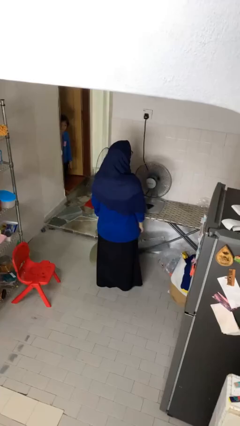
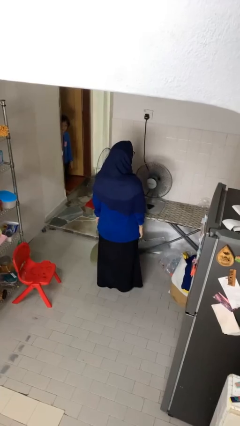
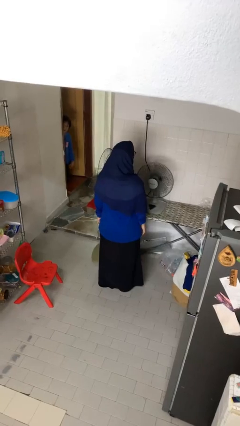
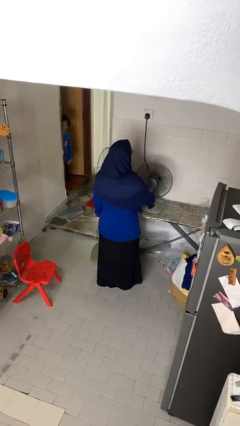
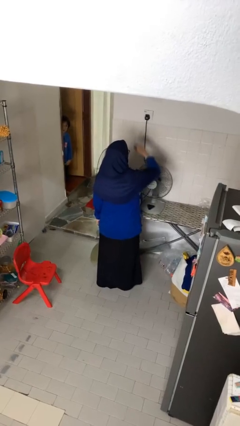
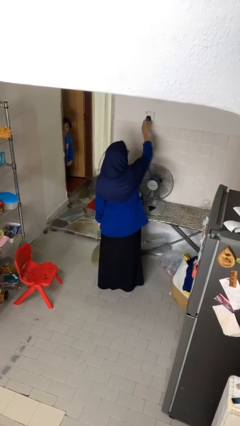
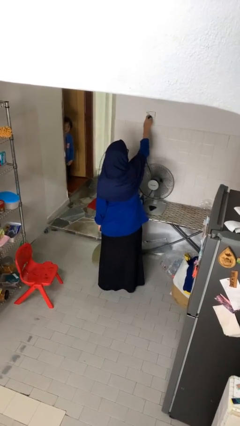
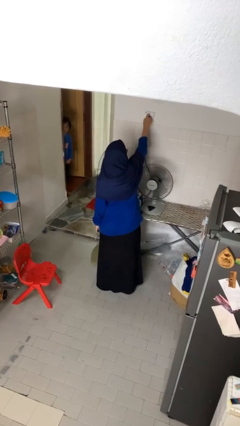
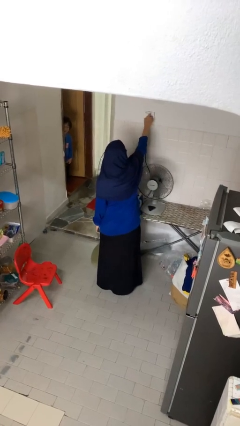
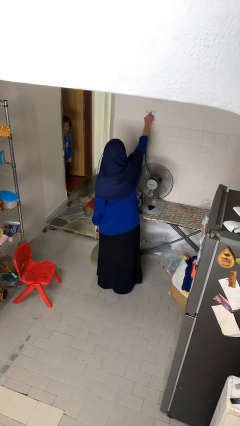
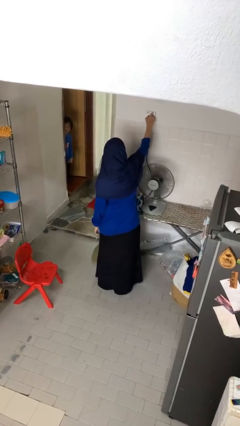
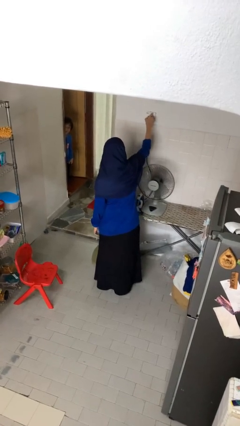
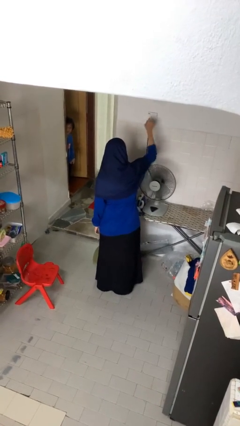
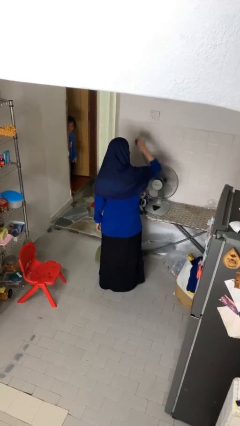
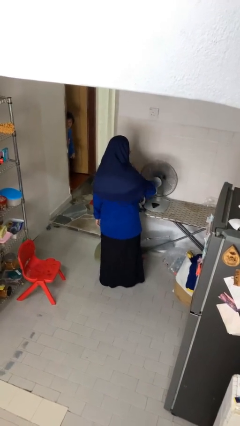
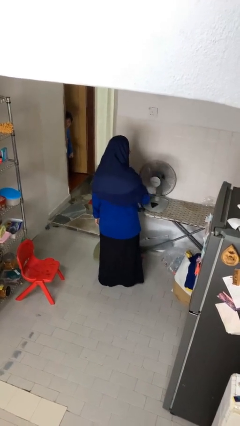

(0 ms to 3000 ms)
person unplugs from electrical socket

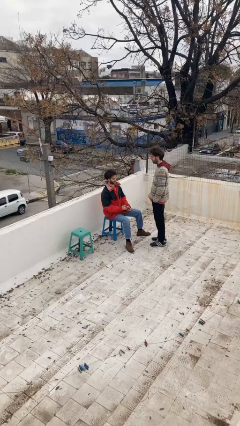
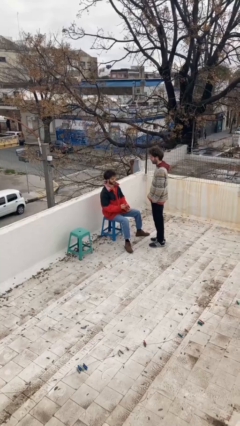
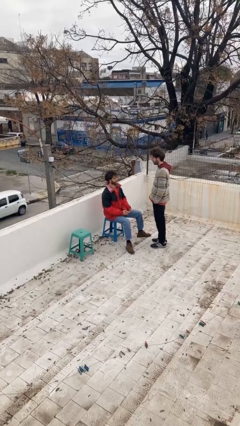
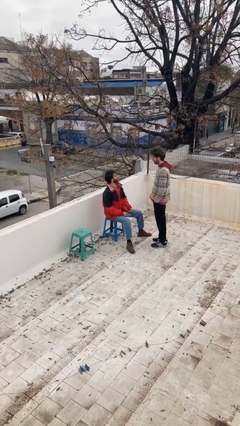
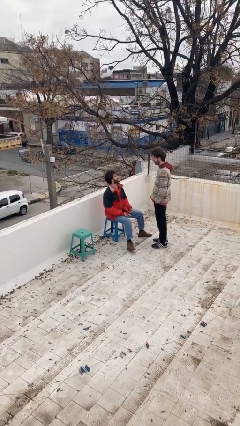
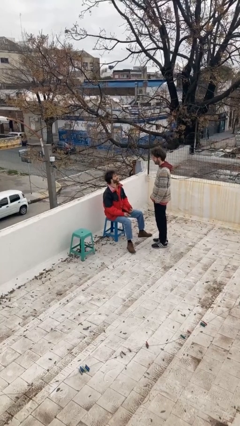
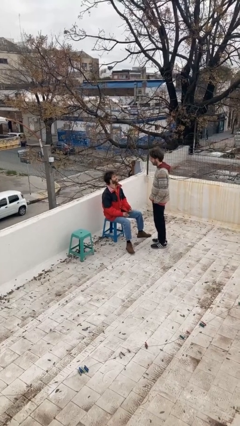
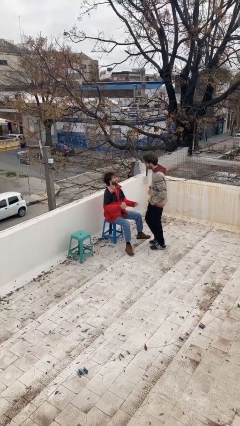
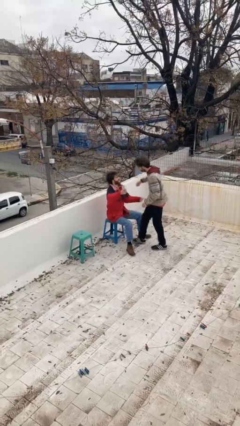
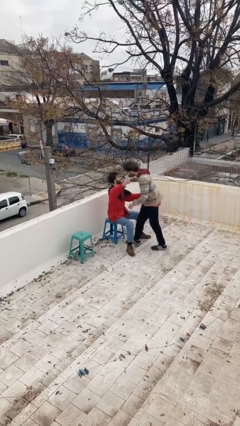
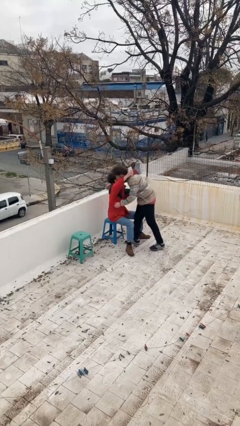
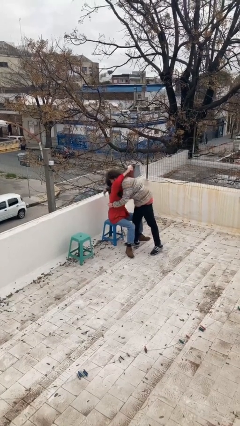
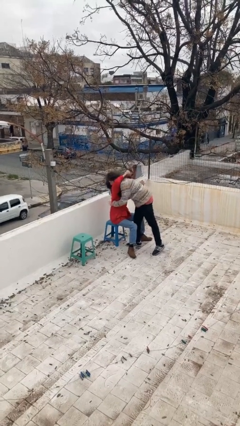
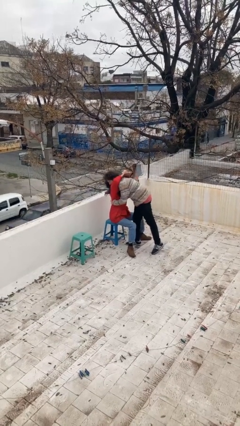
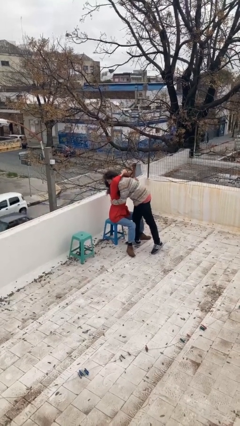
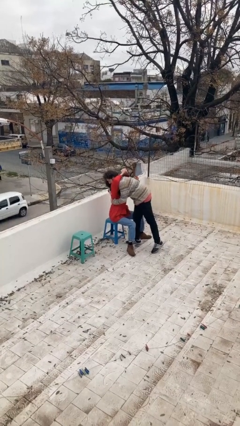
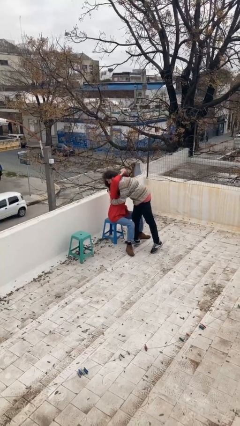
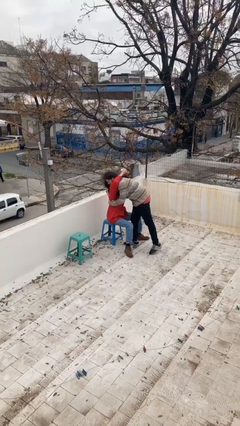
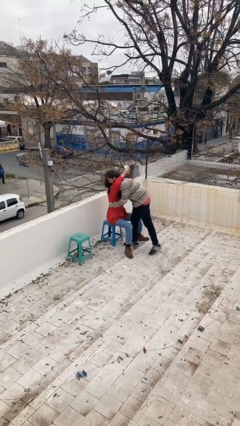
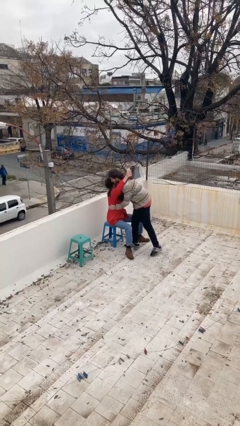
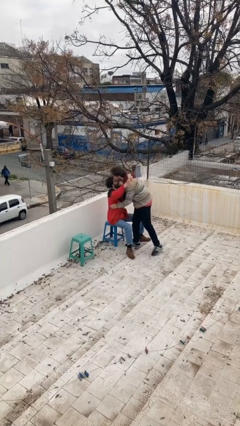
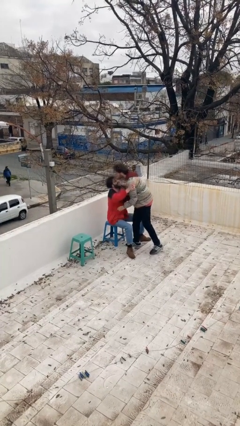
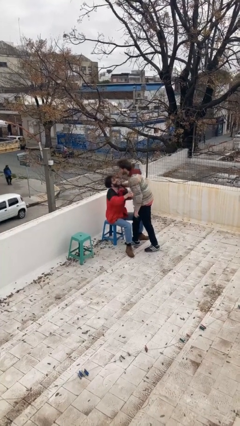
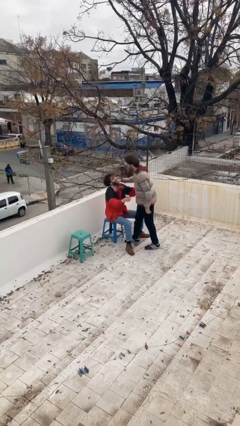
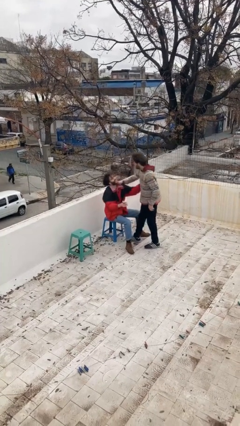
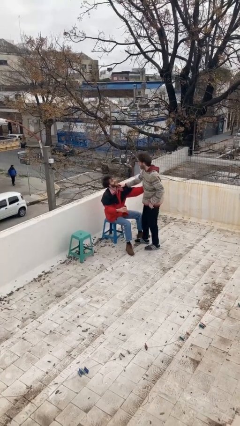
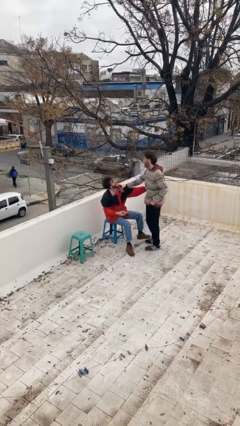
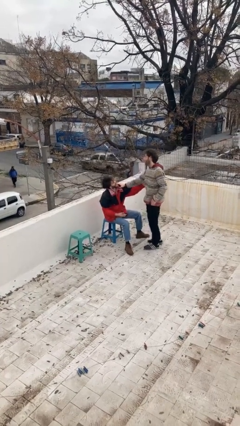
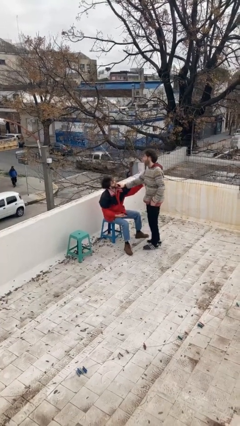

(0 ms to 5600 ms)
person embraces person

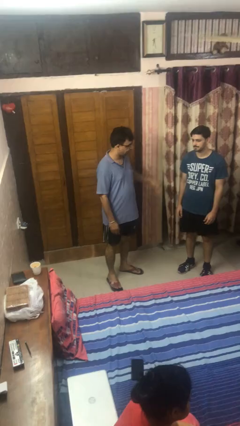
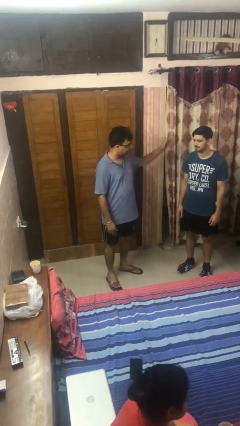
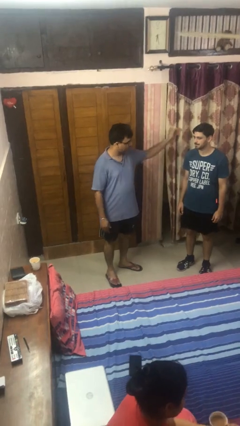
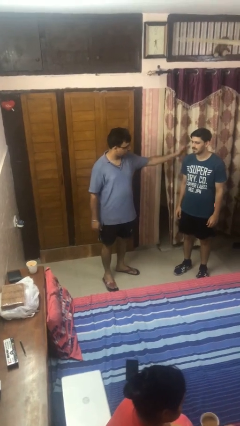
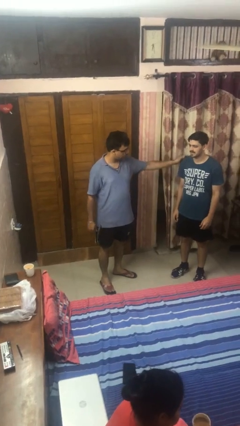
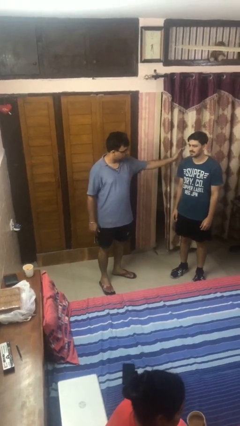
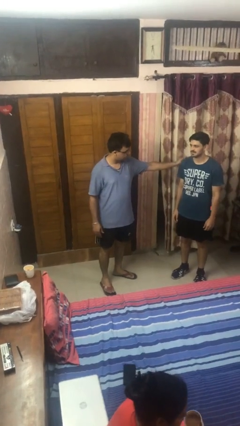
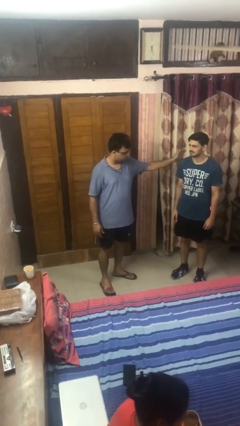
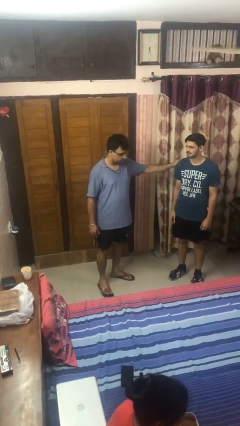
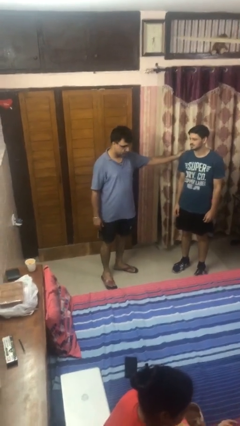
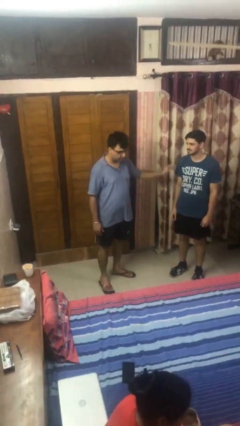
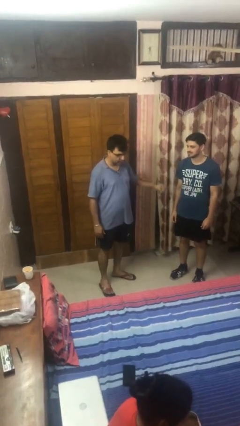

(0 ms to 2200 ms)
person pounds shoulders of person

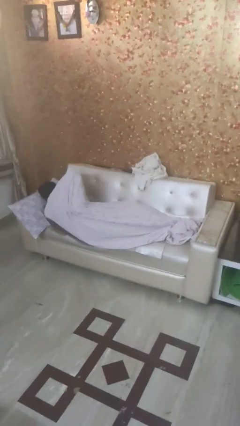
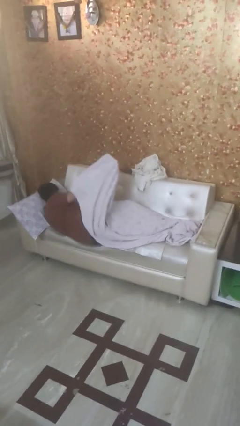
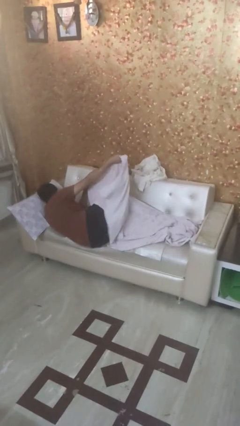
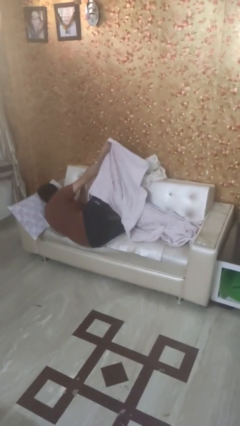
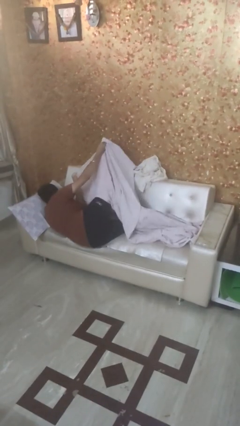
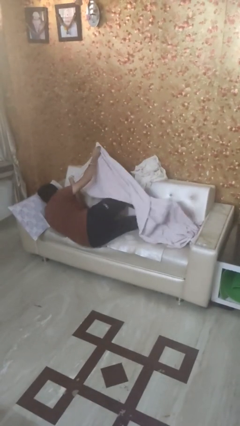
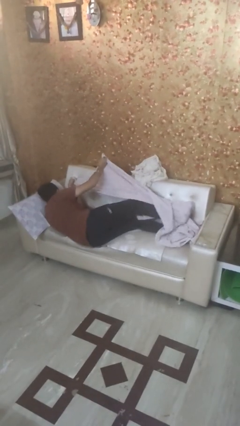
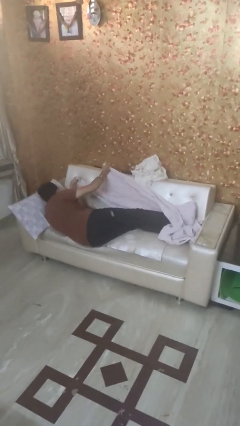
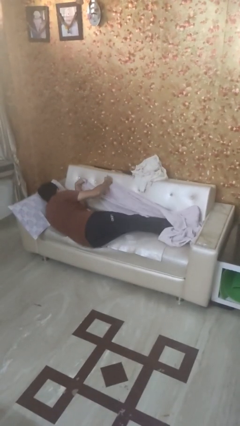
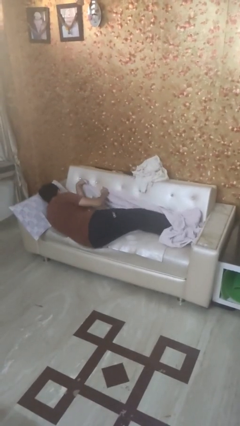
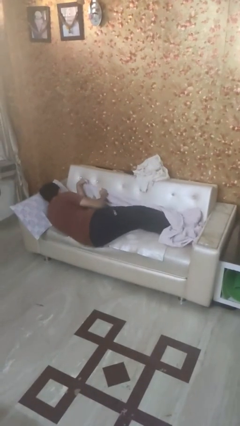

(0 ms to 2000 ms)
person uncovers with bedsheets

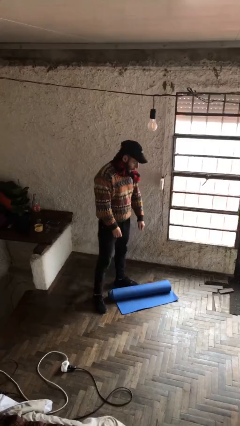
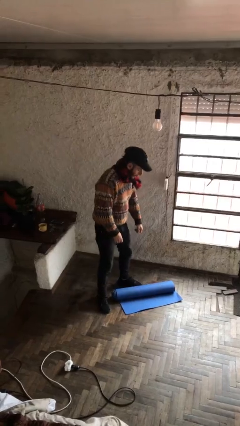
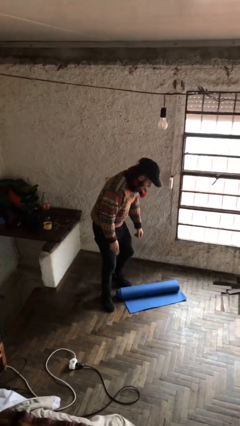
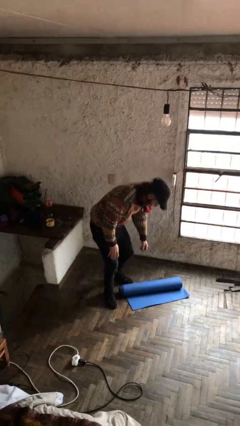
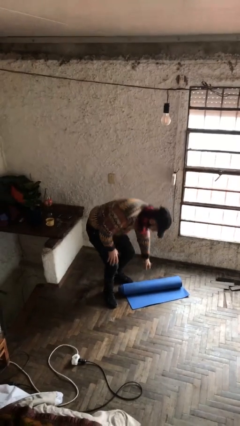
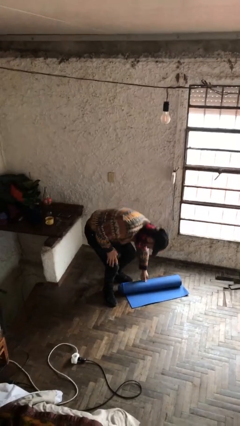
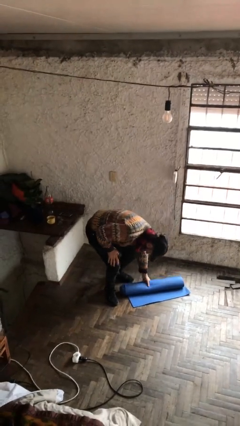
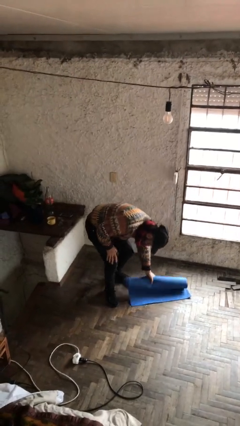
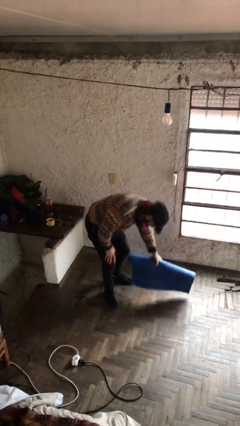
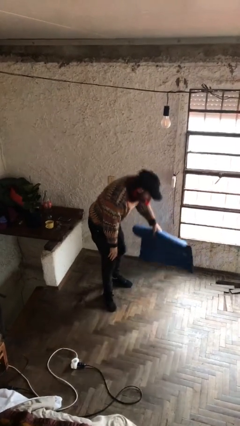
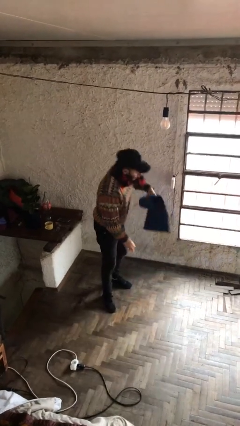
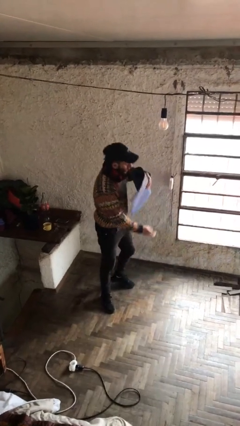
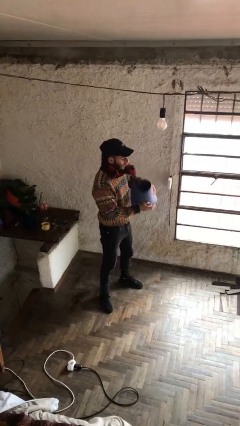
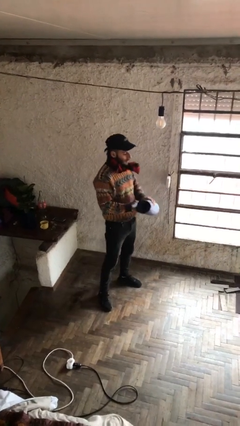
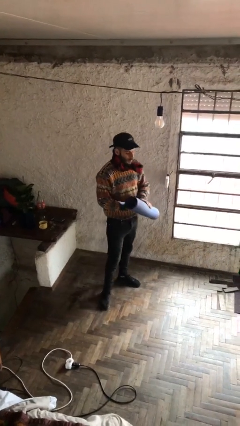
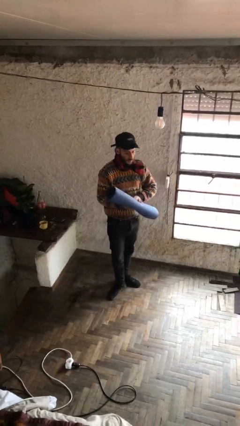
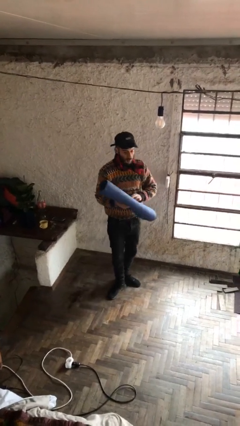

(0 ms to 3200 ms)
person picks up object from floor

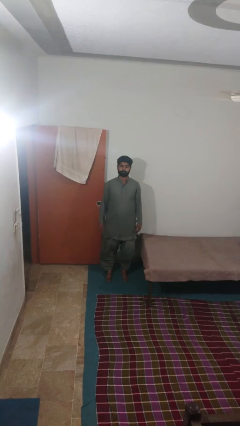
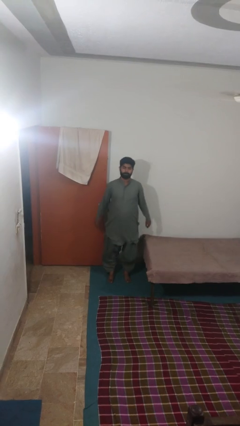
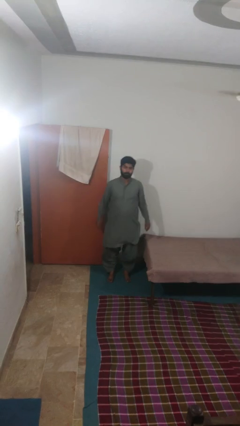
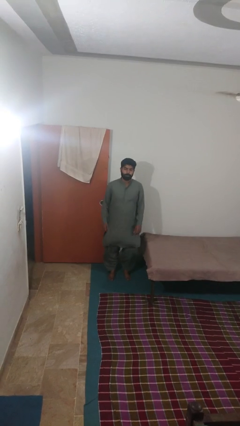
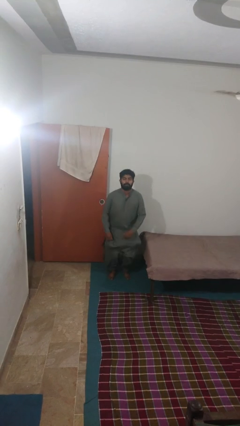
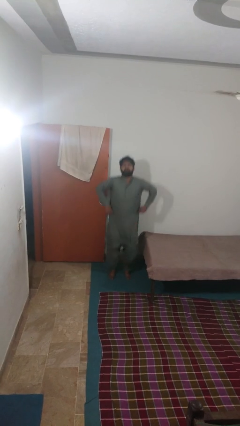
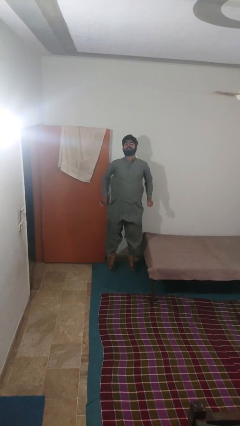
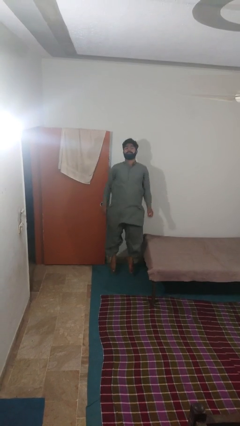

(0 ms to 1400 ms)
person jumps
